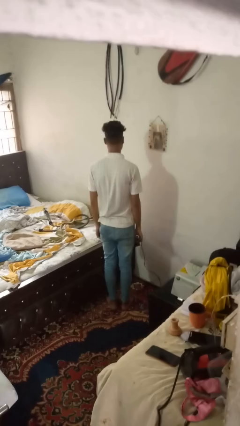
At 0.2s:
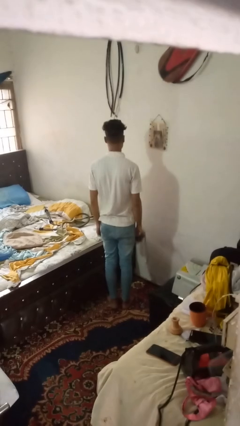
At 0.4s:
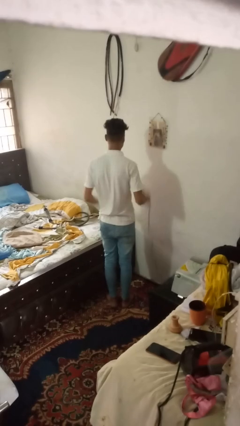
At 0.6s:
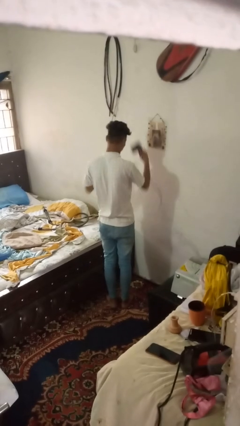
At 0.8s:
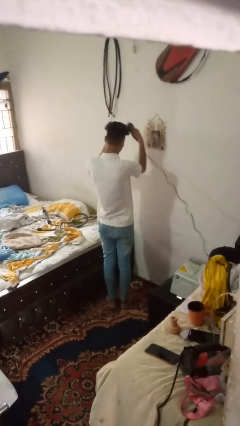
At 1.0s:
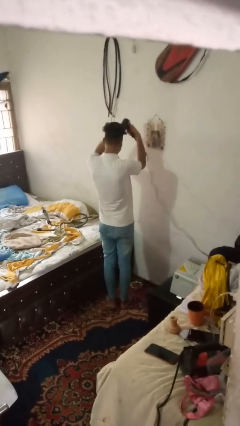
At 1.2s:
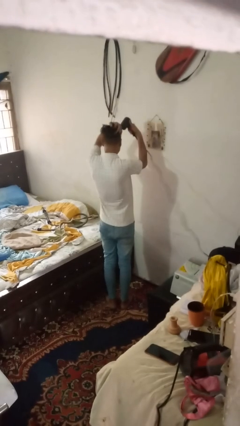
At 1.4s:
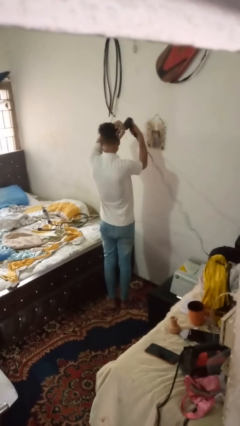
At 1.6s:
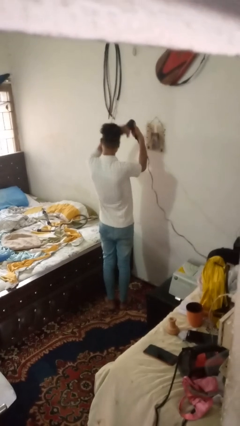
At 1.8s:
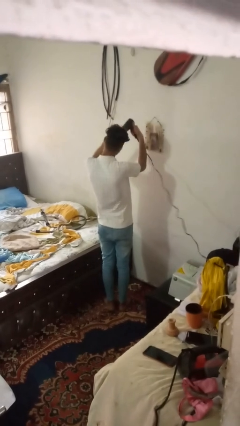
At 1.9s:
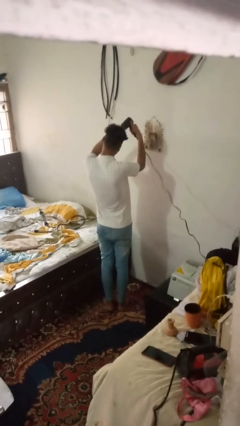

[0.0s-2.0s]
person dries hair with hairdryer

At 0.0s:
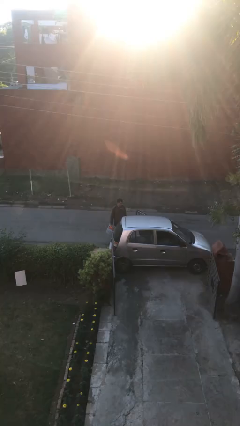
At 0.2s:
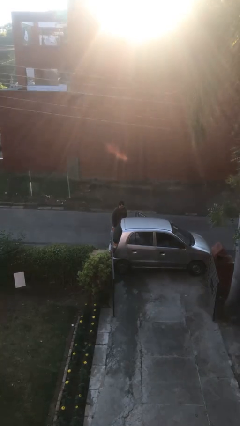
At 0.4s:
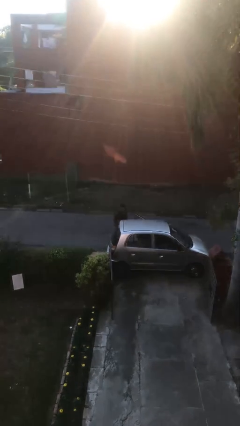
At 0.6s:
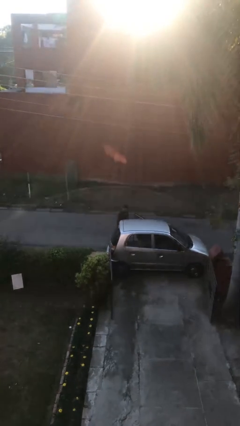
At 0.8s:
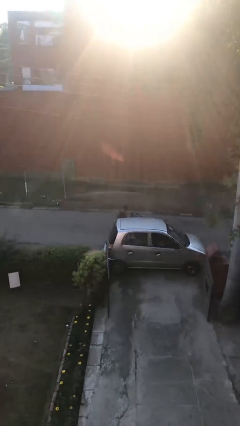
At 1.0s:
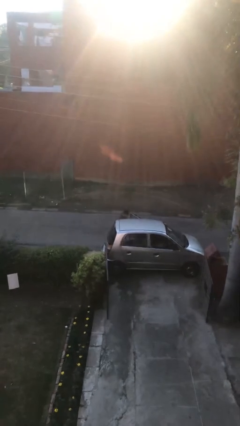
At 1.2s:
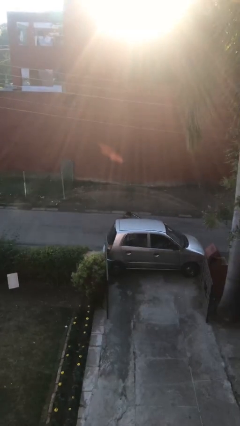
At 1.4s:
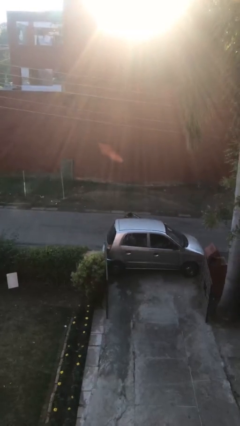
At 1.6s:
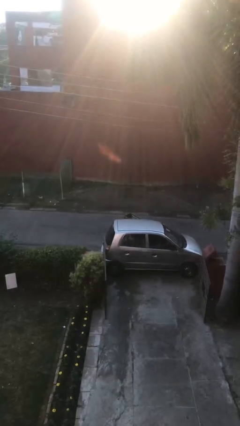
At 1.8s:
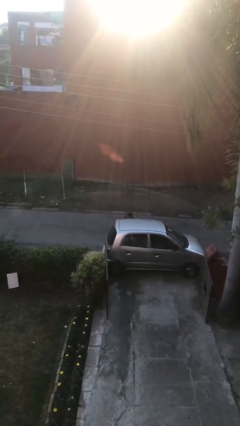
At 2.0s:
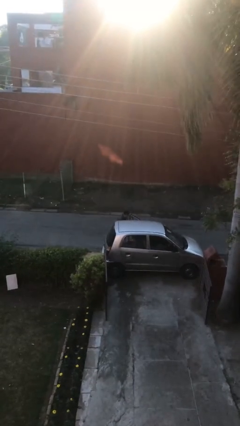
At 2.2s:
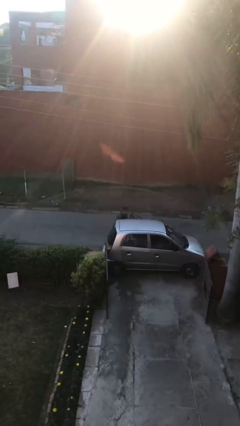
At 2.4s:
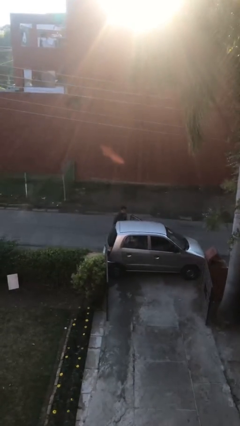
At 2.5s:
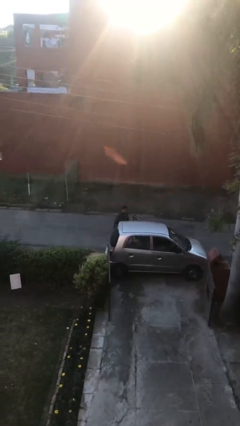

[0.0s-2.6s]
person loads car

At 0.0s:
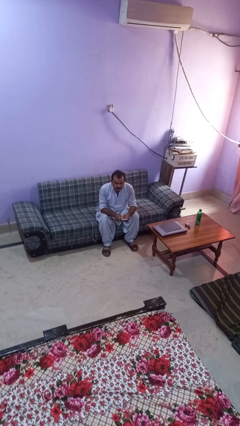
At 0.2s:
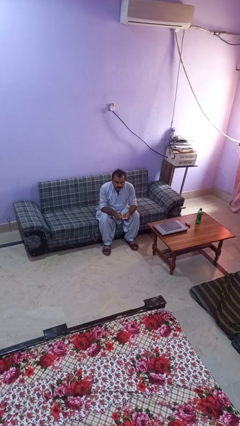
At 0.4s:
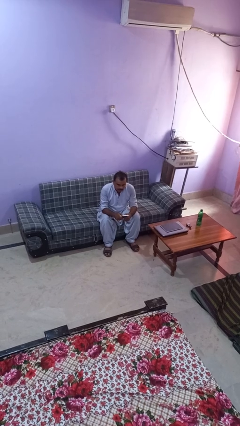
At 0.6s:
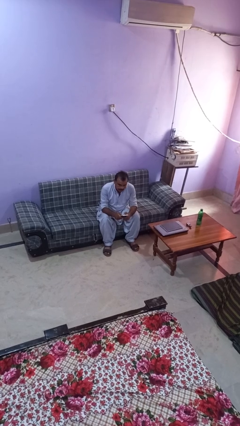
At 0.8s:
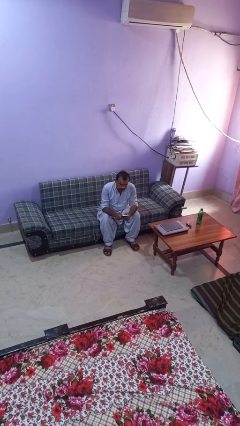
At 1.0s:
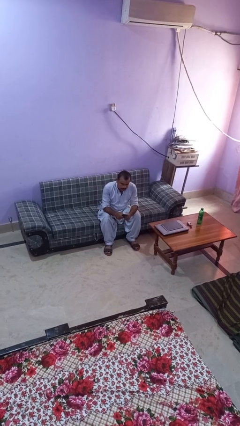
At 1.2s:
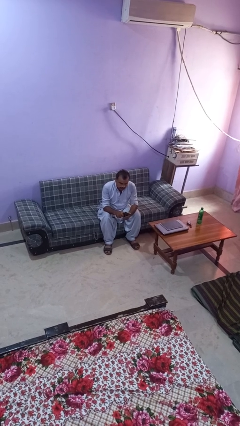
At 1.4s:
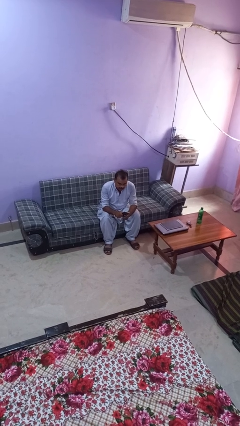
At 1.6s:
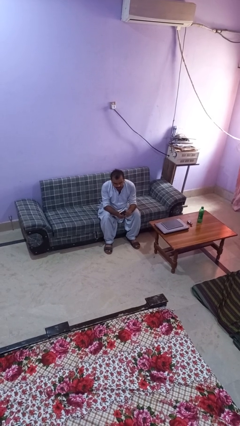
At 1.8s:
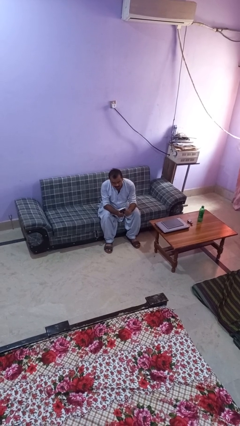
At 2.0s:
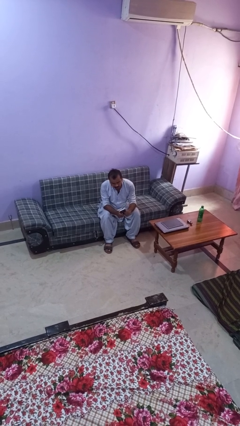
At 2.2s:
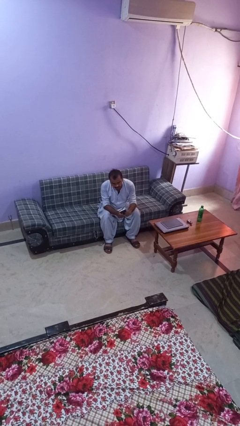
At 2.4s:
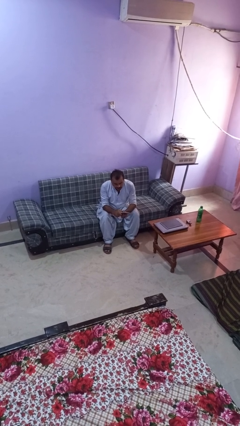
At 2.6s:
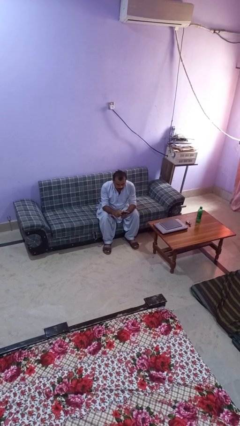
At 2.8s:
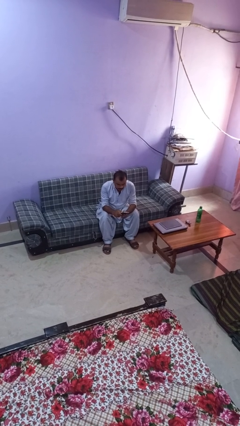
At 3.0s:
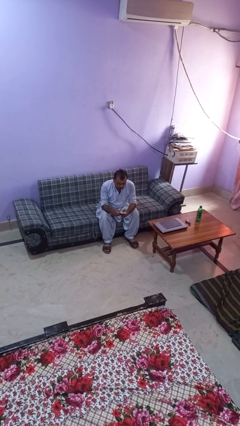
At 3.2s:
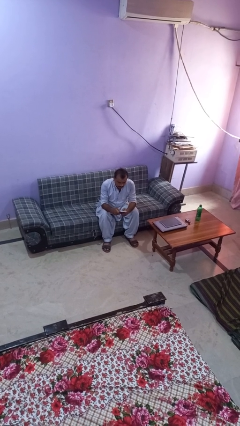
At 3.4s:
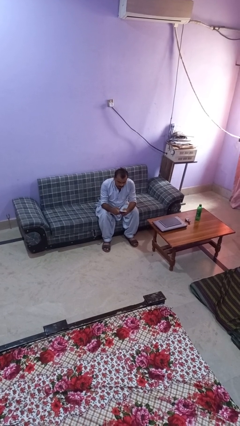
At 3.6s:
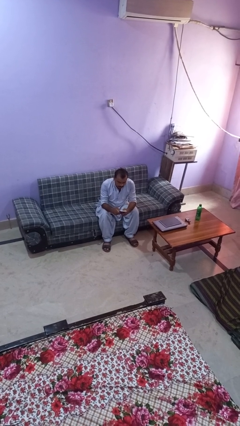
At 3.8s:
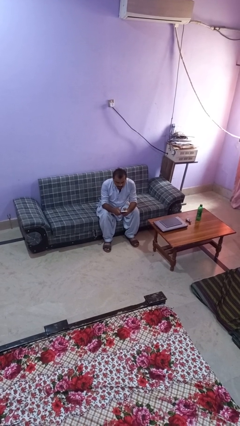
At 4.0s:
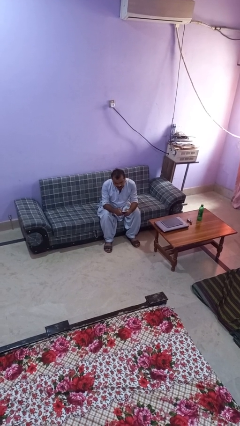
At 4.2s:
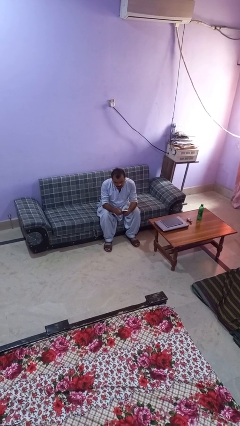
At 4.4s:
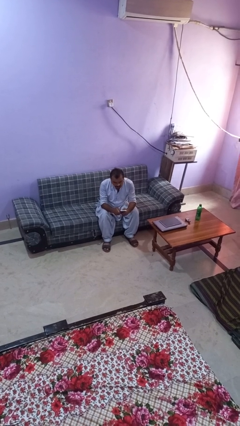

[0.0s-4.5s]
person interacts with handheld game

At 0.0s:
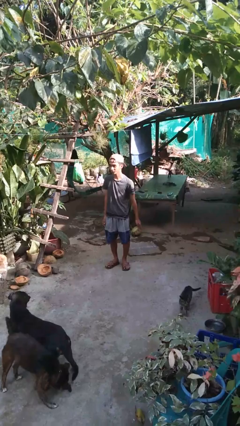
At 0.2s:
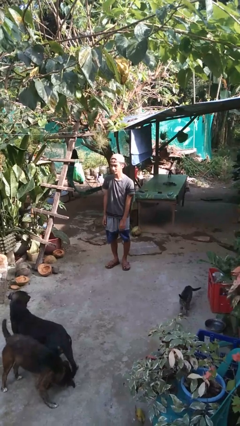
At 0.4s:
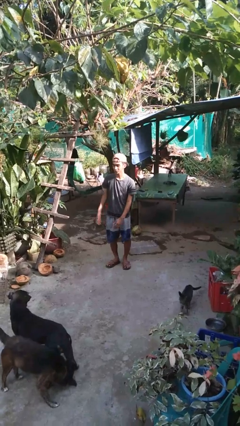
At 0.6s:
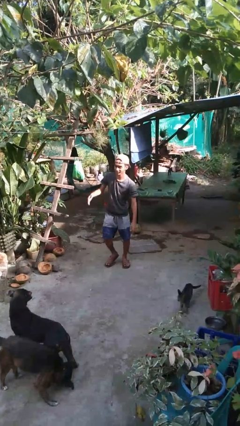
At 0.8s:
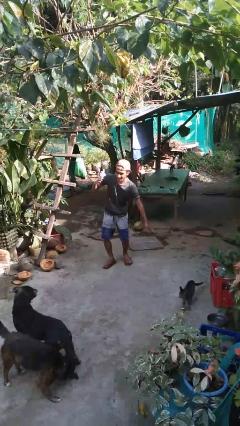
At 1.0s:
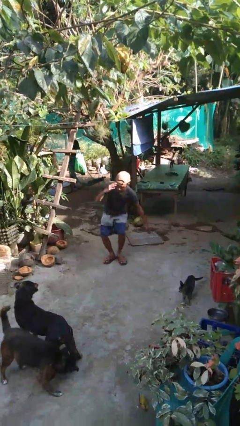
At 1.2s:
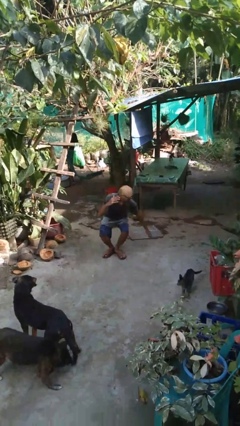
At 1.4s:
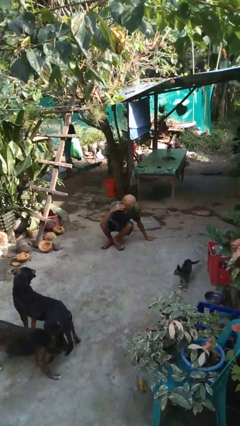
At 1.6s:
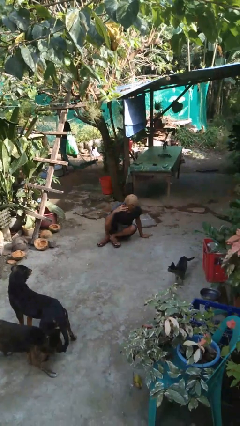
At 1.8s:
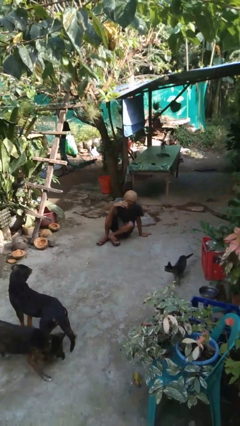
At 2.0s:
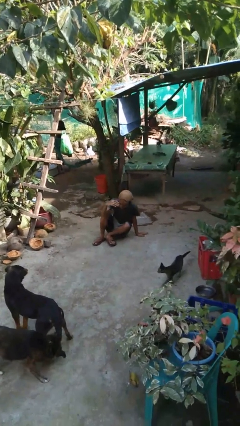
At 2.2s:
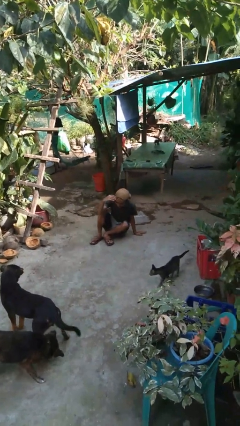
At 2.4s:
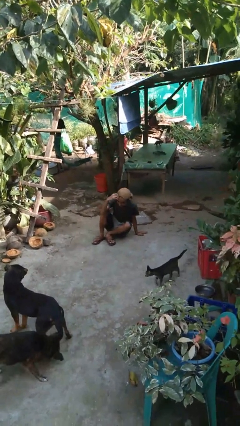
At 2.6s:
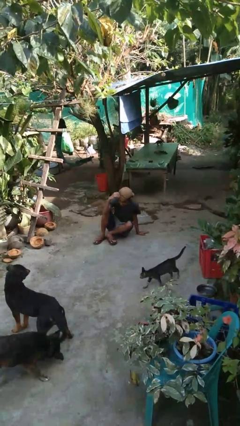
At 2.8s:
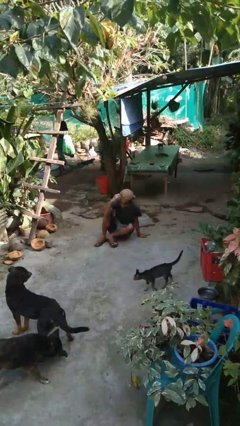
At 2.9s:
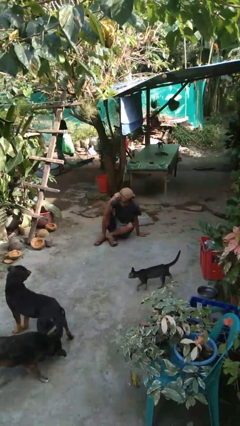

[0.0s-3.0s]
person falls while standing

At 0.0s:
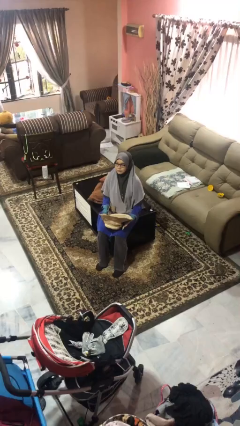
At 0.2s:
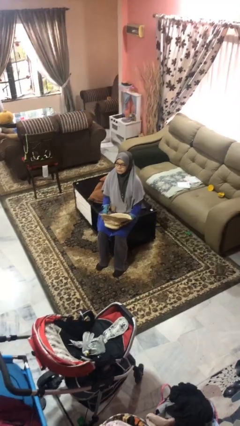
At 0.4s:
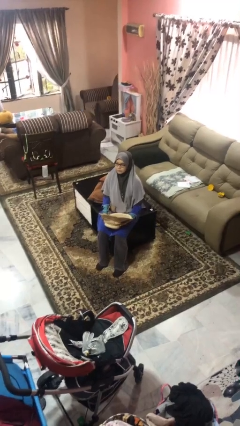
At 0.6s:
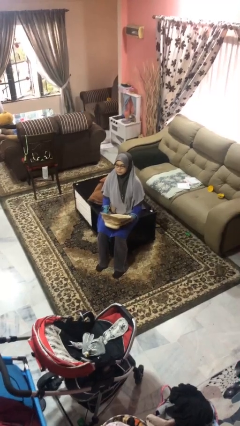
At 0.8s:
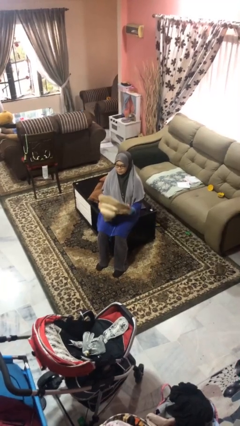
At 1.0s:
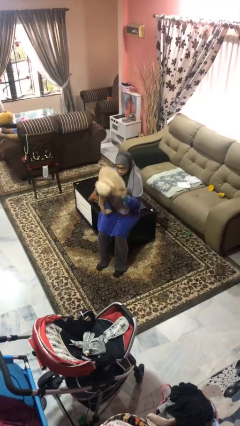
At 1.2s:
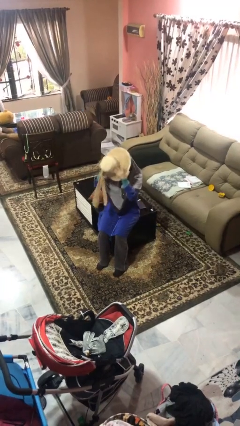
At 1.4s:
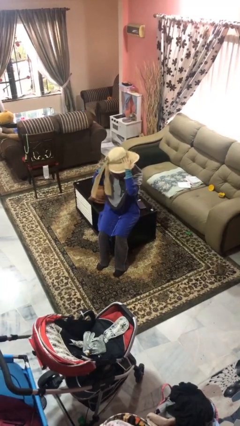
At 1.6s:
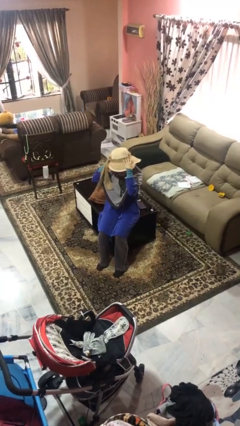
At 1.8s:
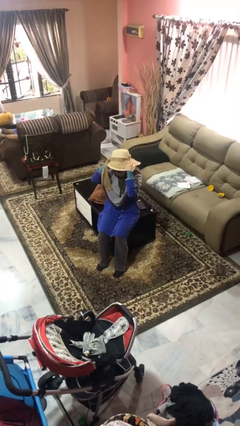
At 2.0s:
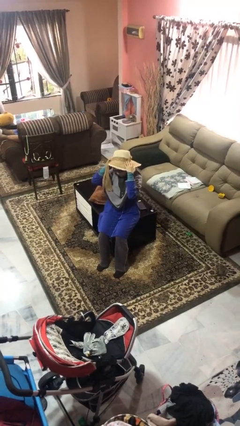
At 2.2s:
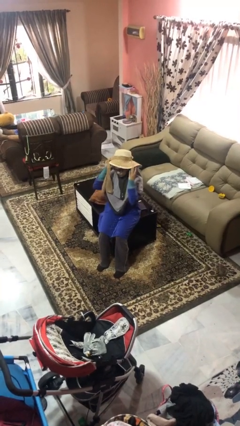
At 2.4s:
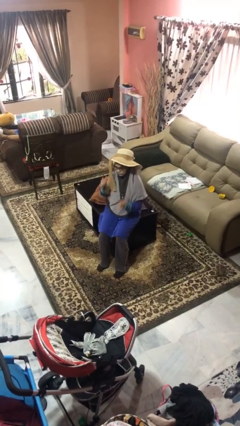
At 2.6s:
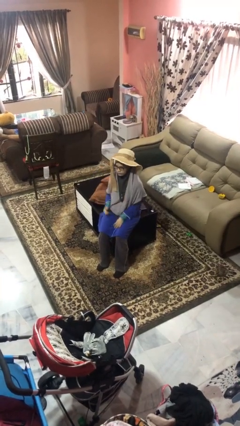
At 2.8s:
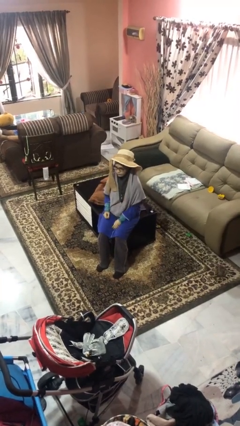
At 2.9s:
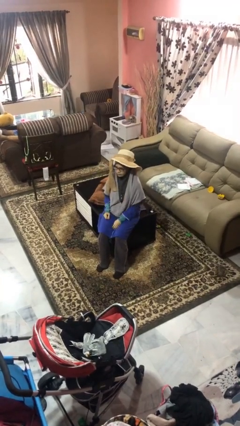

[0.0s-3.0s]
person puts on hat

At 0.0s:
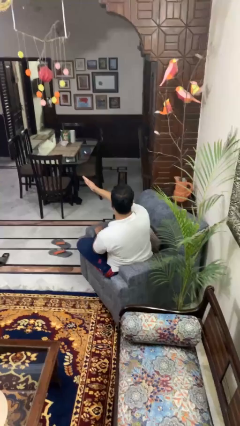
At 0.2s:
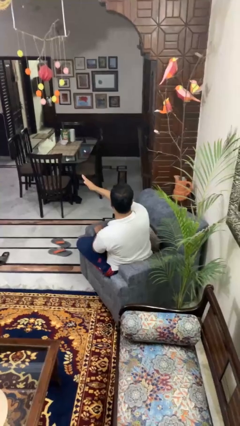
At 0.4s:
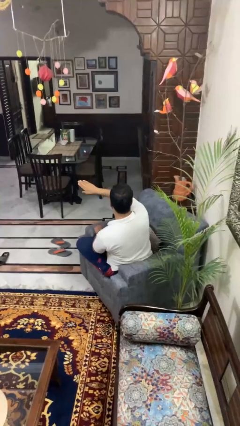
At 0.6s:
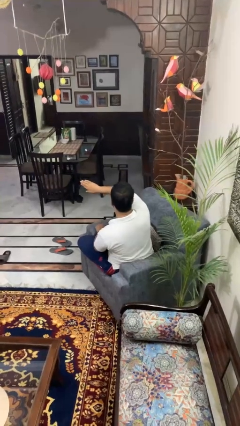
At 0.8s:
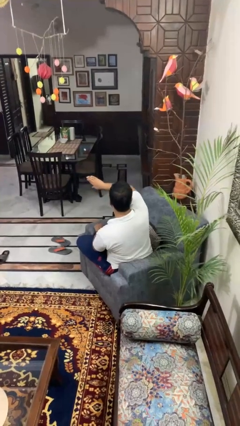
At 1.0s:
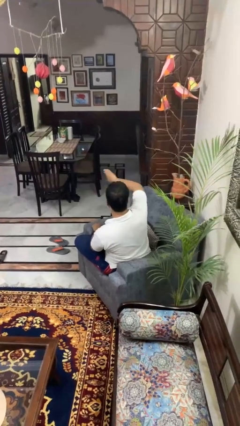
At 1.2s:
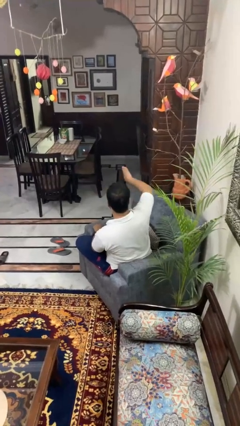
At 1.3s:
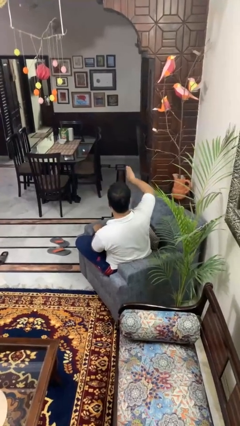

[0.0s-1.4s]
person gestures swipe right

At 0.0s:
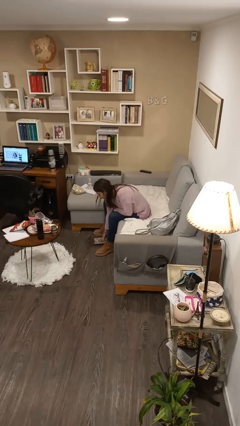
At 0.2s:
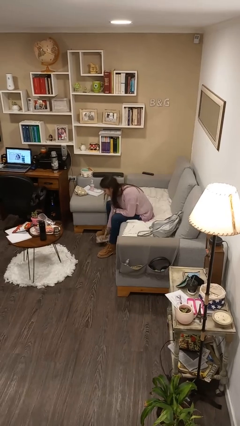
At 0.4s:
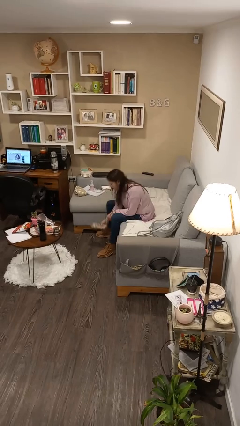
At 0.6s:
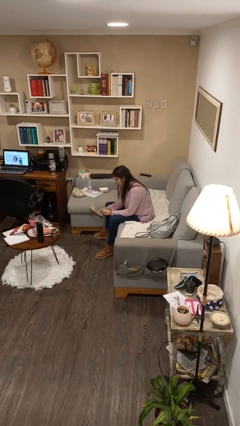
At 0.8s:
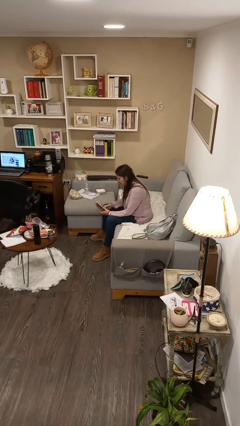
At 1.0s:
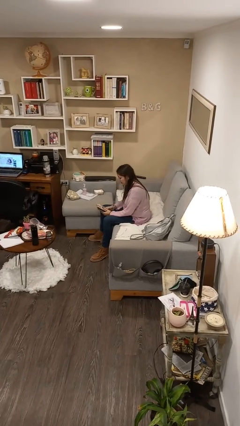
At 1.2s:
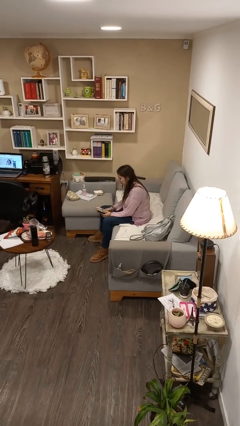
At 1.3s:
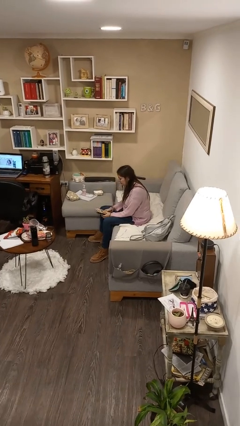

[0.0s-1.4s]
person picks up object from floor
